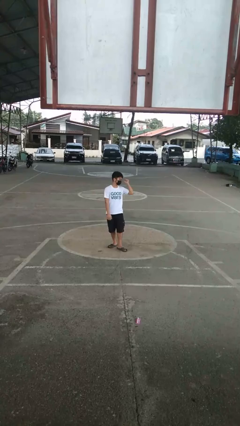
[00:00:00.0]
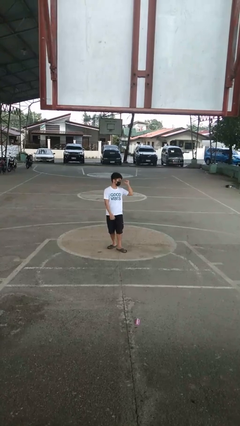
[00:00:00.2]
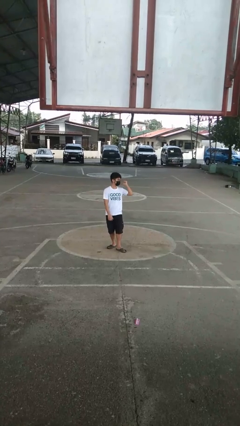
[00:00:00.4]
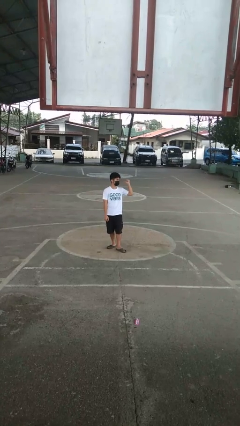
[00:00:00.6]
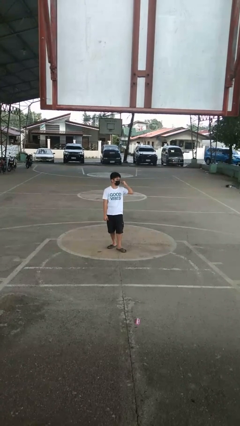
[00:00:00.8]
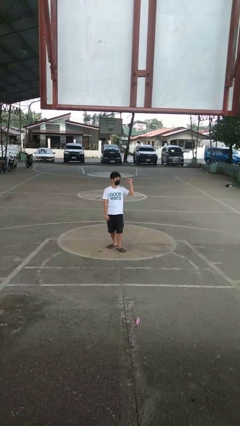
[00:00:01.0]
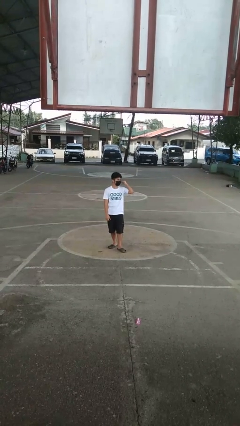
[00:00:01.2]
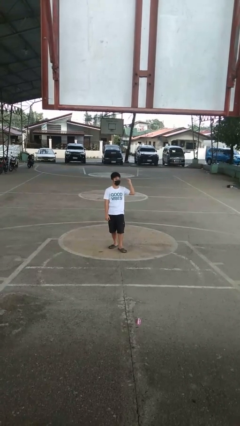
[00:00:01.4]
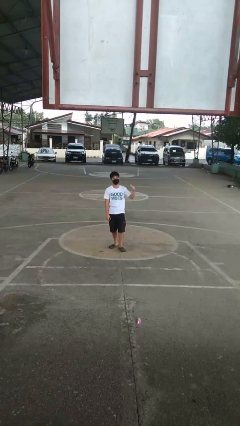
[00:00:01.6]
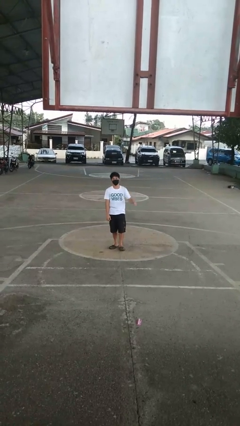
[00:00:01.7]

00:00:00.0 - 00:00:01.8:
person gestures behind me

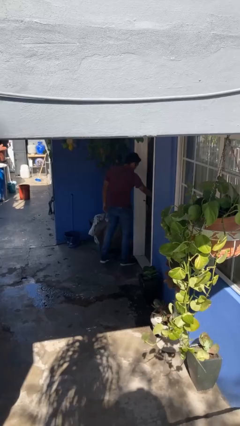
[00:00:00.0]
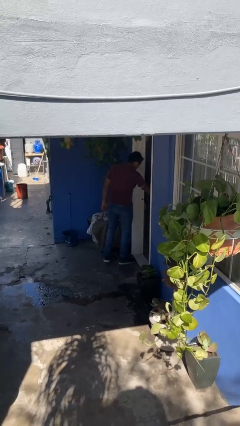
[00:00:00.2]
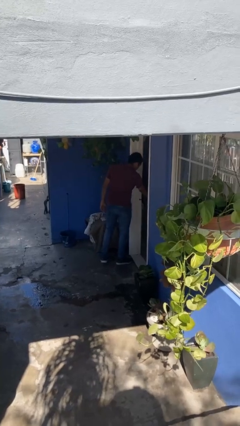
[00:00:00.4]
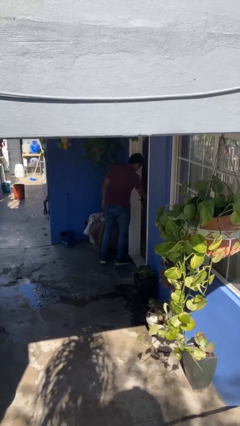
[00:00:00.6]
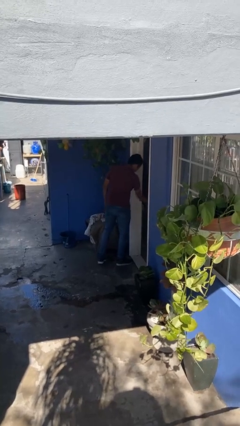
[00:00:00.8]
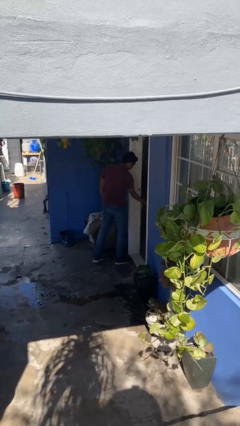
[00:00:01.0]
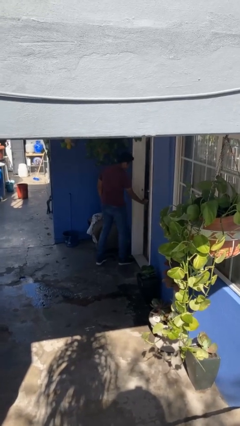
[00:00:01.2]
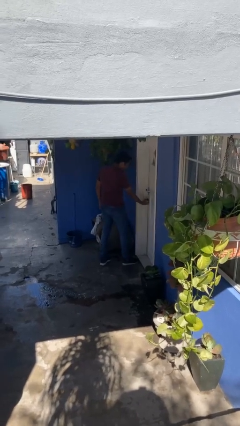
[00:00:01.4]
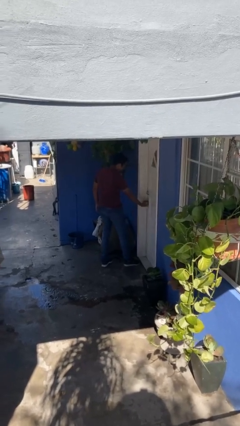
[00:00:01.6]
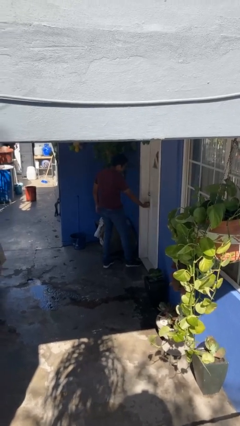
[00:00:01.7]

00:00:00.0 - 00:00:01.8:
person closes facility door

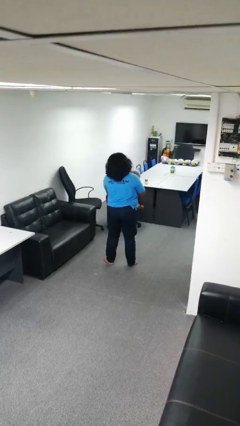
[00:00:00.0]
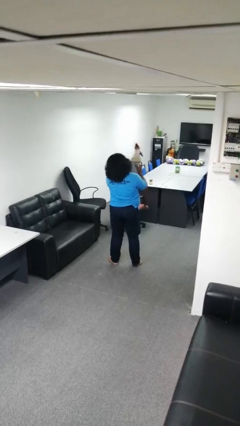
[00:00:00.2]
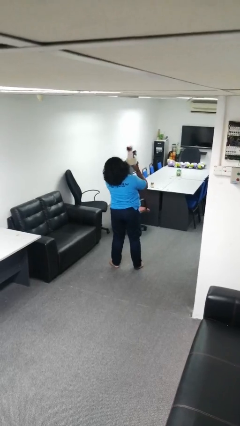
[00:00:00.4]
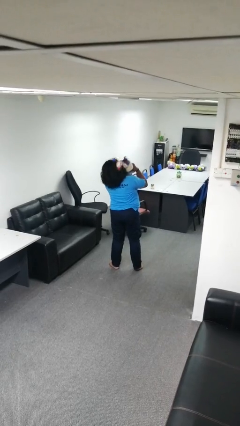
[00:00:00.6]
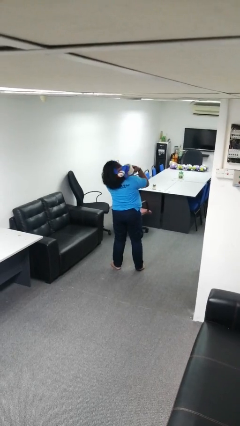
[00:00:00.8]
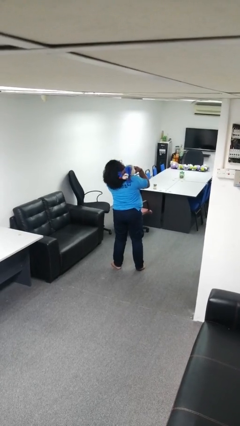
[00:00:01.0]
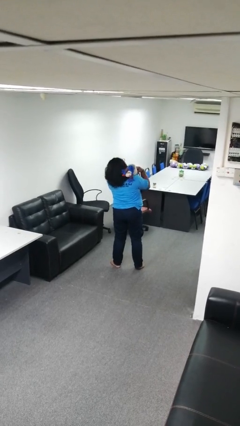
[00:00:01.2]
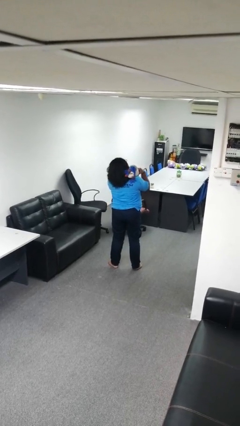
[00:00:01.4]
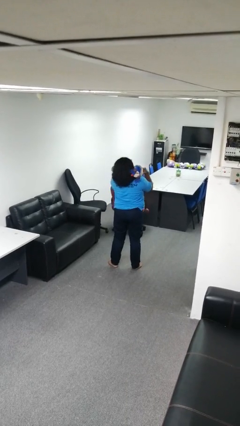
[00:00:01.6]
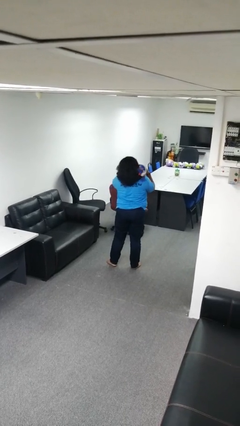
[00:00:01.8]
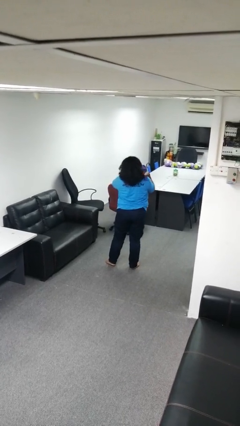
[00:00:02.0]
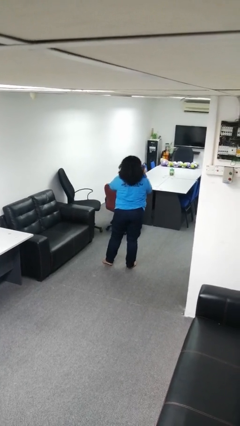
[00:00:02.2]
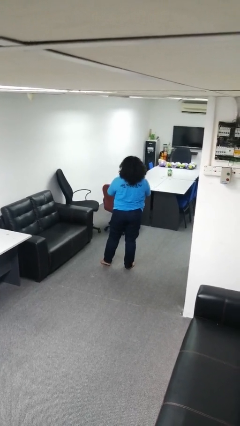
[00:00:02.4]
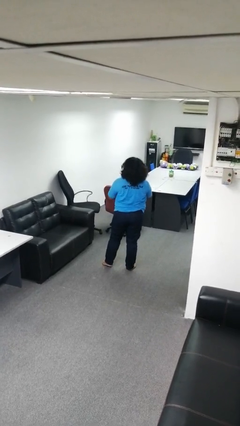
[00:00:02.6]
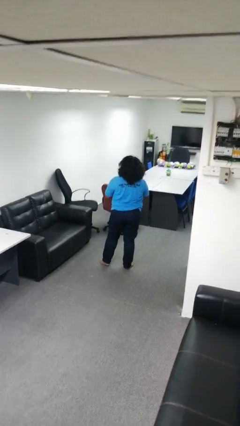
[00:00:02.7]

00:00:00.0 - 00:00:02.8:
person hugs stuffed animal

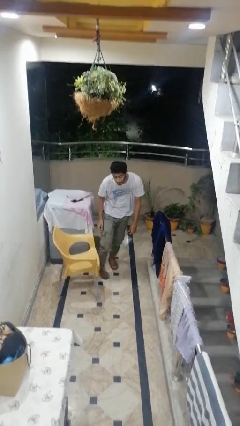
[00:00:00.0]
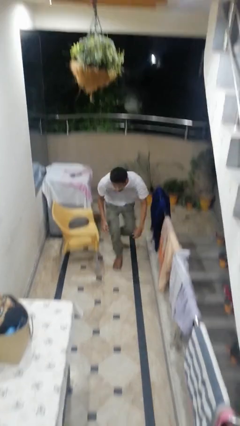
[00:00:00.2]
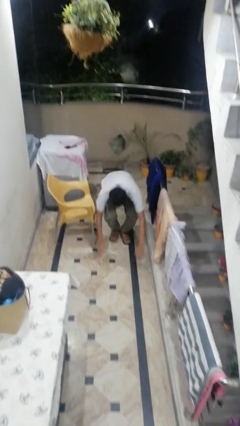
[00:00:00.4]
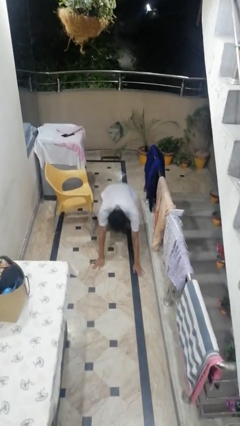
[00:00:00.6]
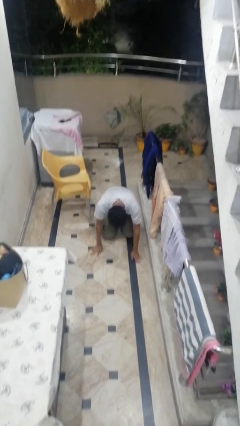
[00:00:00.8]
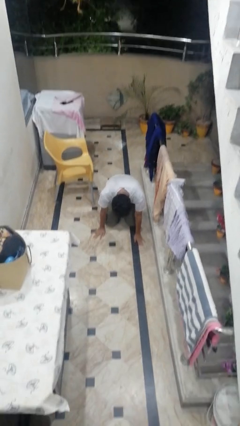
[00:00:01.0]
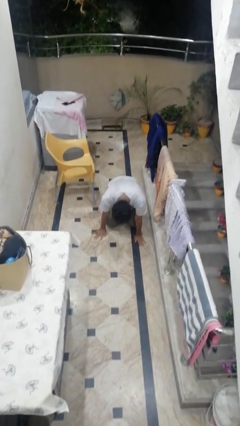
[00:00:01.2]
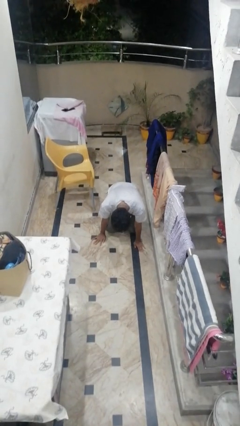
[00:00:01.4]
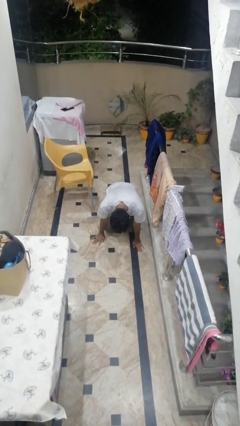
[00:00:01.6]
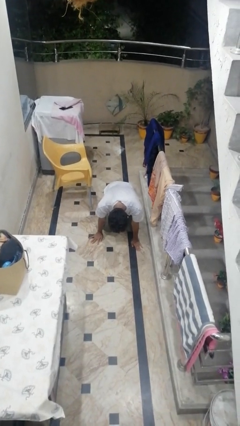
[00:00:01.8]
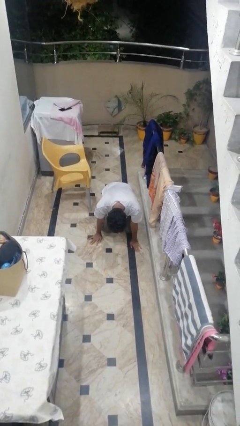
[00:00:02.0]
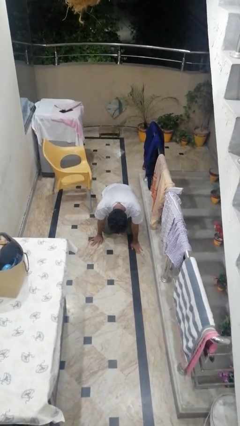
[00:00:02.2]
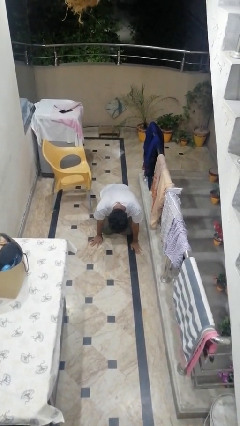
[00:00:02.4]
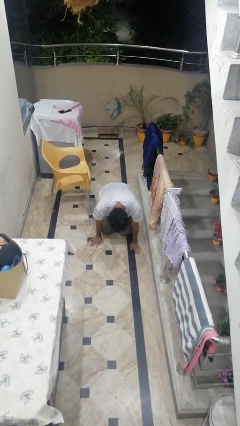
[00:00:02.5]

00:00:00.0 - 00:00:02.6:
person trips on object on floor

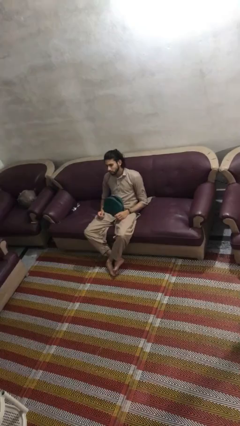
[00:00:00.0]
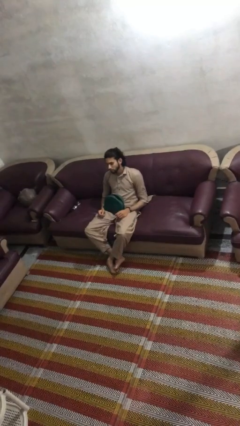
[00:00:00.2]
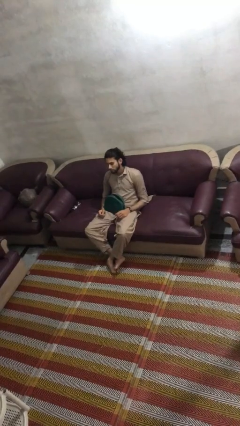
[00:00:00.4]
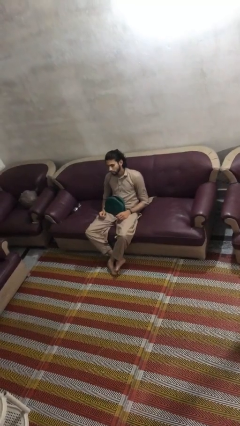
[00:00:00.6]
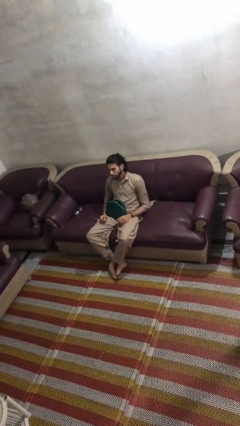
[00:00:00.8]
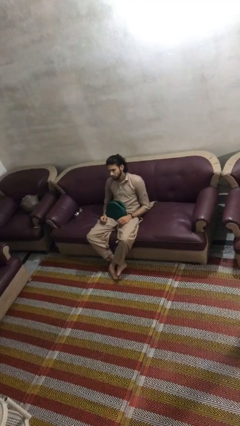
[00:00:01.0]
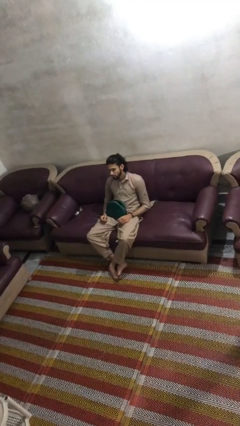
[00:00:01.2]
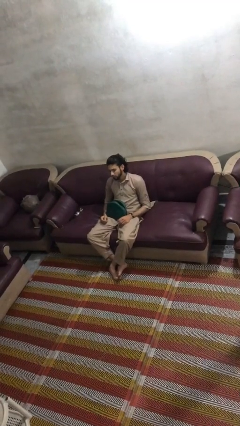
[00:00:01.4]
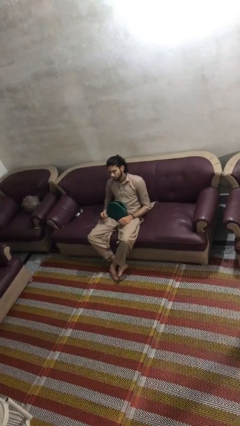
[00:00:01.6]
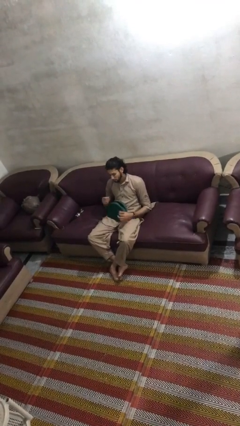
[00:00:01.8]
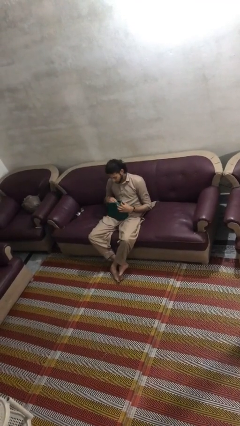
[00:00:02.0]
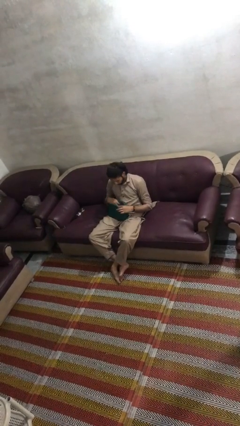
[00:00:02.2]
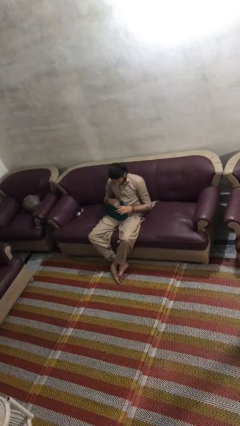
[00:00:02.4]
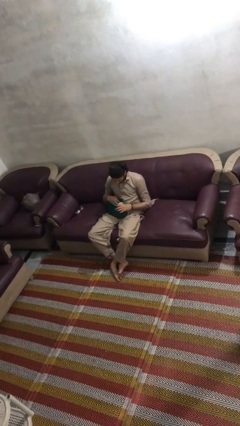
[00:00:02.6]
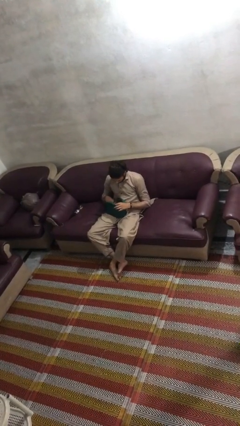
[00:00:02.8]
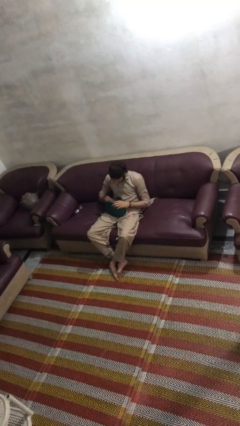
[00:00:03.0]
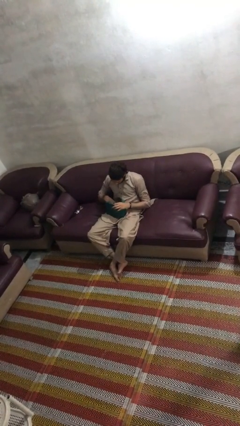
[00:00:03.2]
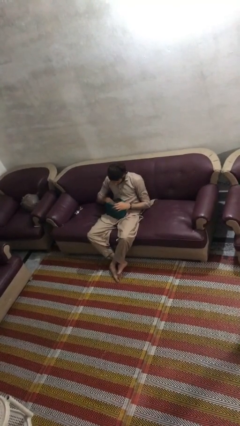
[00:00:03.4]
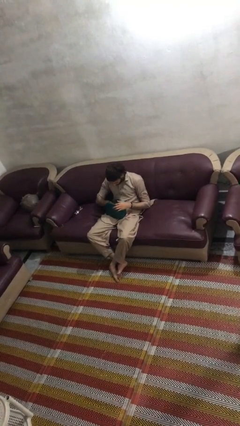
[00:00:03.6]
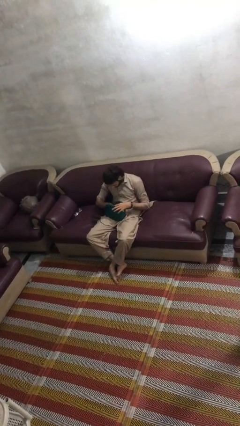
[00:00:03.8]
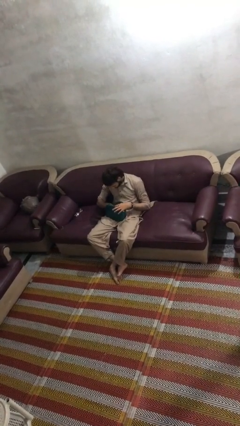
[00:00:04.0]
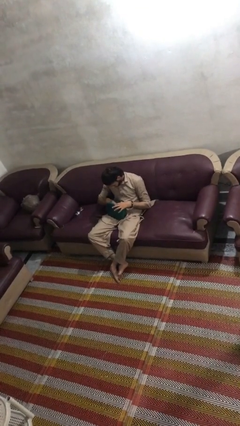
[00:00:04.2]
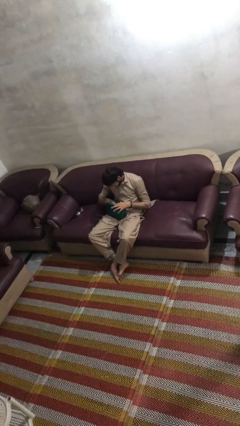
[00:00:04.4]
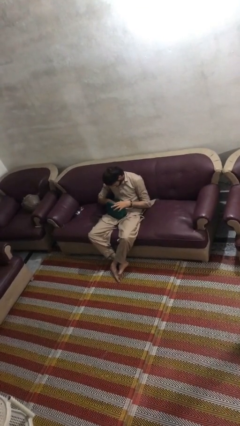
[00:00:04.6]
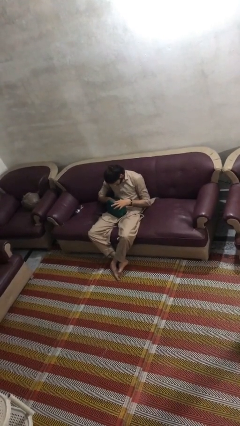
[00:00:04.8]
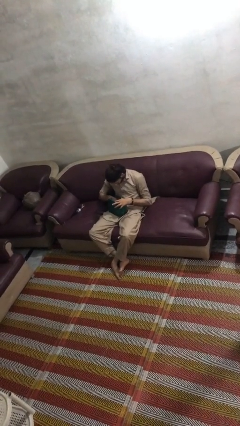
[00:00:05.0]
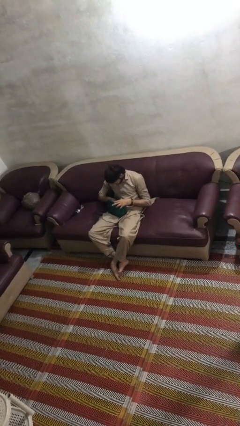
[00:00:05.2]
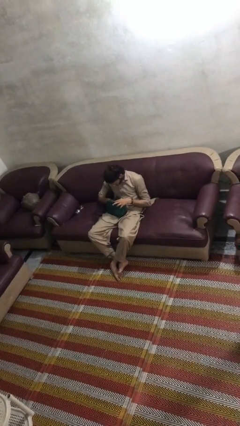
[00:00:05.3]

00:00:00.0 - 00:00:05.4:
person searches in purse

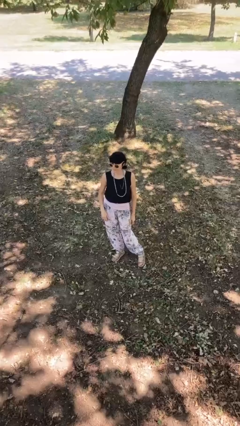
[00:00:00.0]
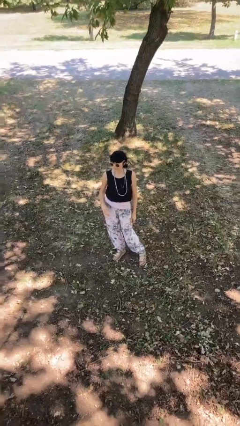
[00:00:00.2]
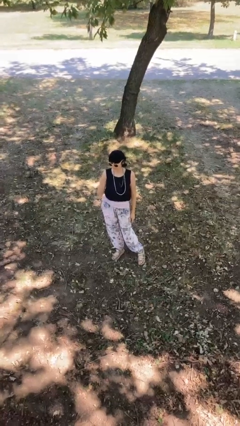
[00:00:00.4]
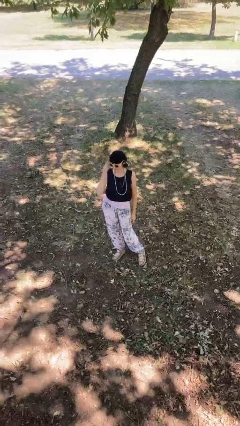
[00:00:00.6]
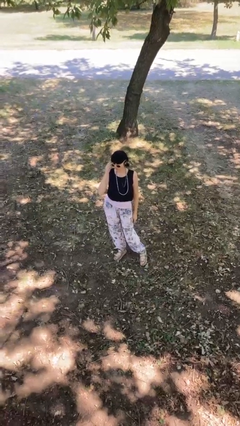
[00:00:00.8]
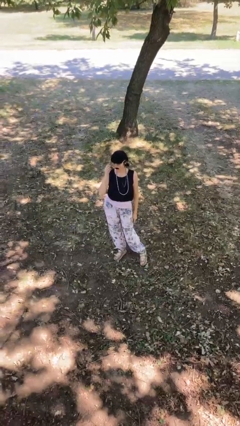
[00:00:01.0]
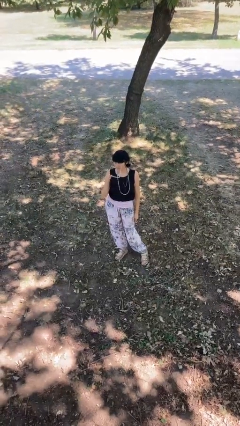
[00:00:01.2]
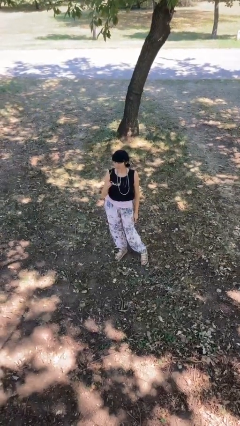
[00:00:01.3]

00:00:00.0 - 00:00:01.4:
person takes off sunglasses

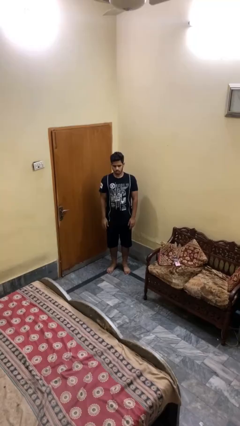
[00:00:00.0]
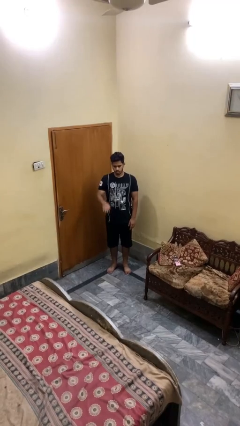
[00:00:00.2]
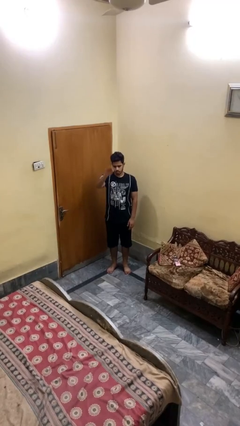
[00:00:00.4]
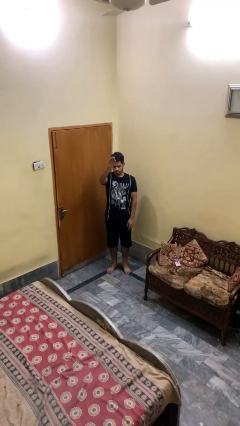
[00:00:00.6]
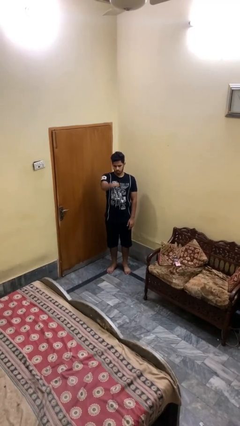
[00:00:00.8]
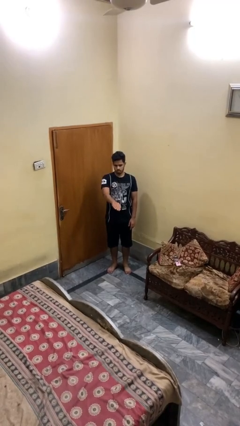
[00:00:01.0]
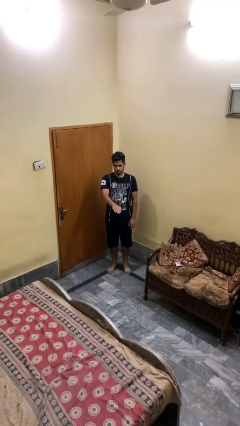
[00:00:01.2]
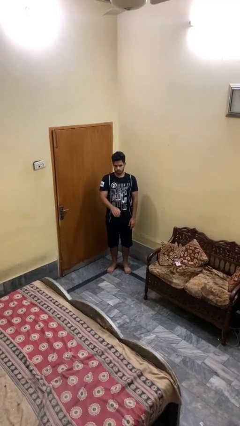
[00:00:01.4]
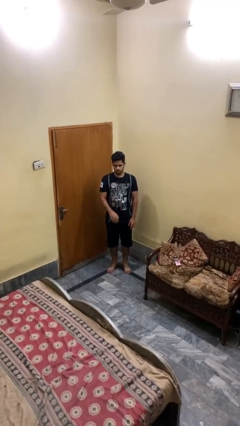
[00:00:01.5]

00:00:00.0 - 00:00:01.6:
person gestures swipe down
